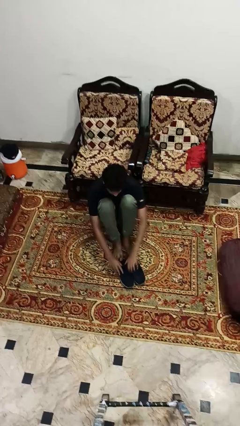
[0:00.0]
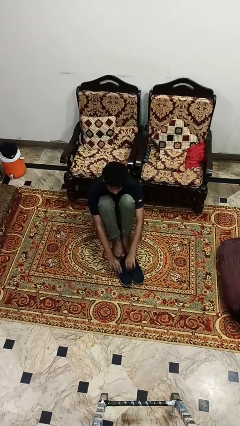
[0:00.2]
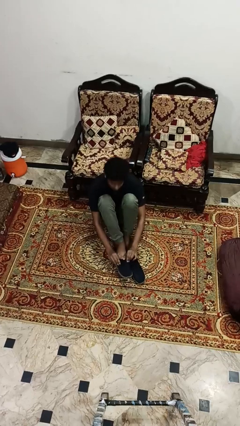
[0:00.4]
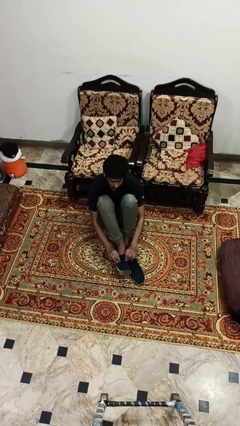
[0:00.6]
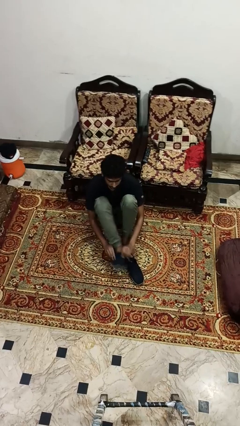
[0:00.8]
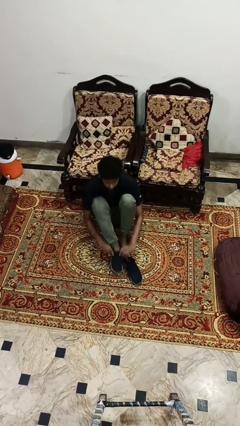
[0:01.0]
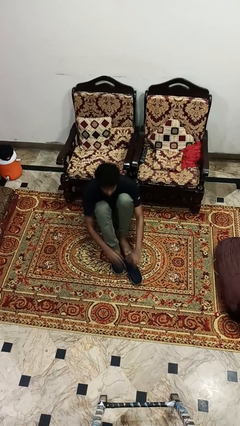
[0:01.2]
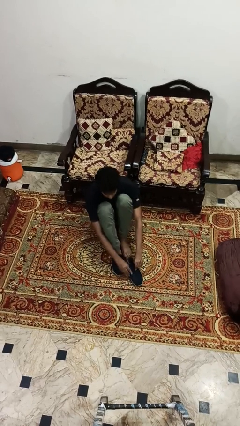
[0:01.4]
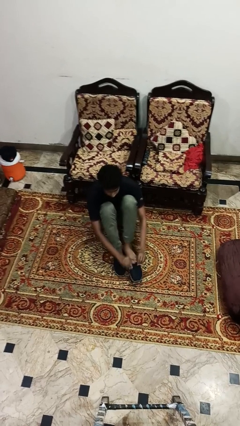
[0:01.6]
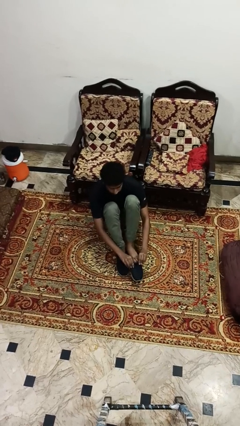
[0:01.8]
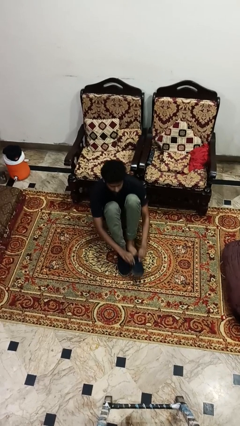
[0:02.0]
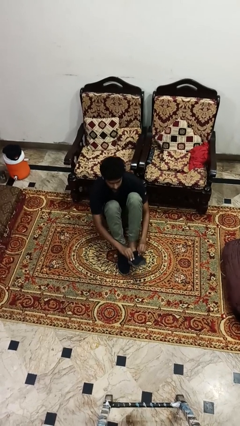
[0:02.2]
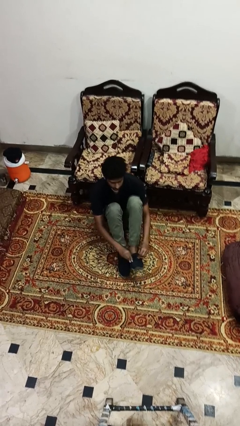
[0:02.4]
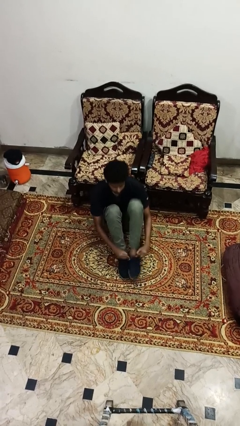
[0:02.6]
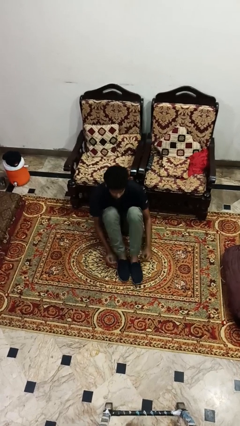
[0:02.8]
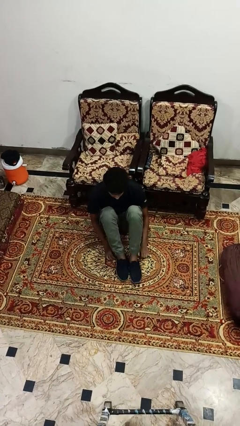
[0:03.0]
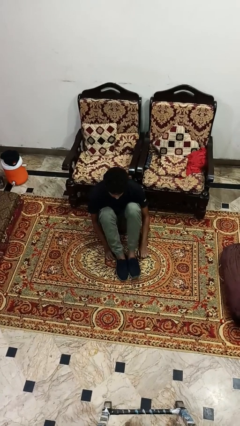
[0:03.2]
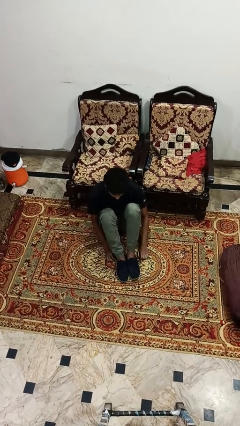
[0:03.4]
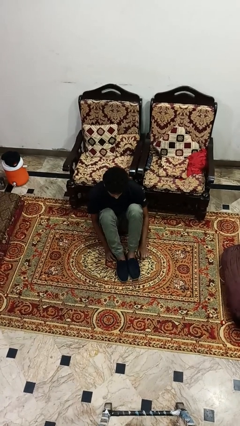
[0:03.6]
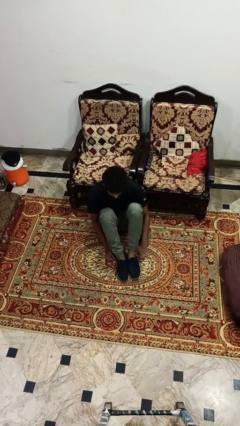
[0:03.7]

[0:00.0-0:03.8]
person puts on shoes

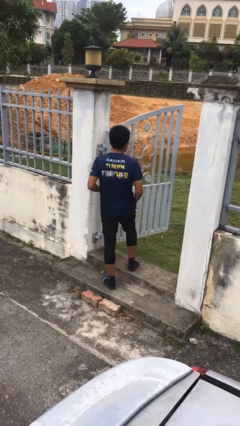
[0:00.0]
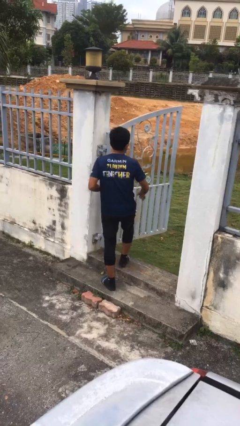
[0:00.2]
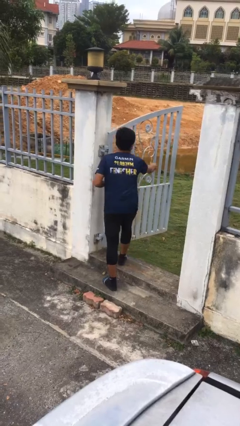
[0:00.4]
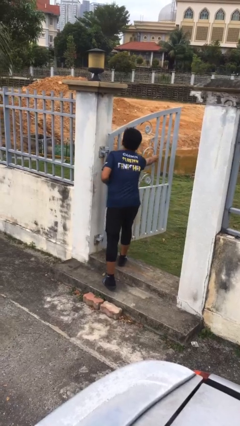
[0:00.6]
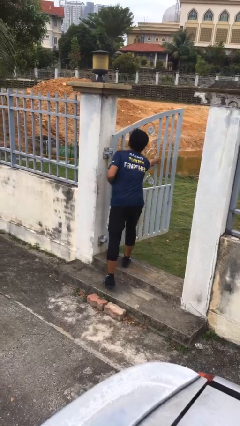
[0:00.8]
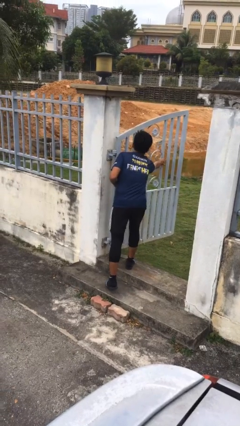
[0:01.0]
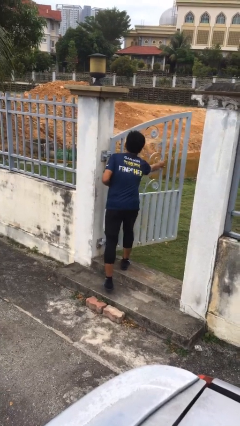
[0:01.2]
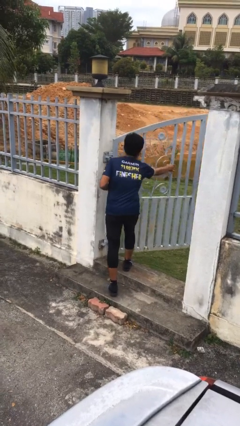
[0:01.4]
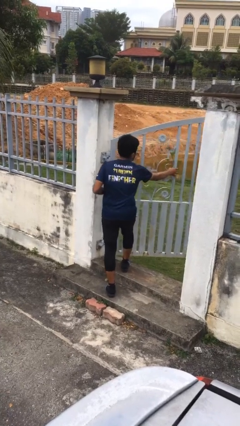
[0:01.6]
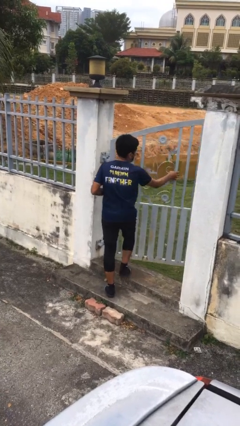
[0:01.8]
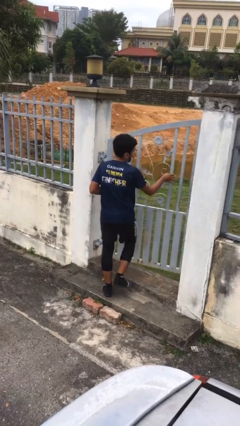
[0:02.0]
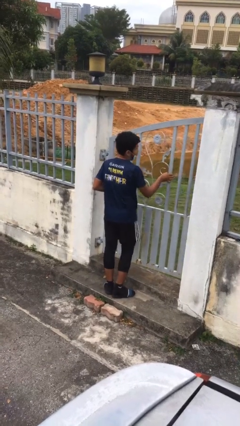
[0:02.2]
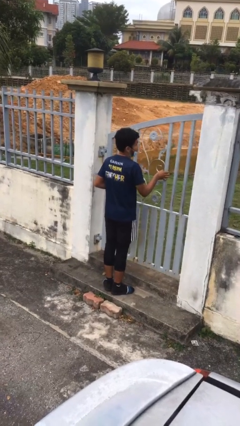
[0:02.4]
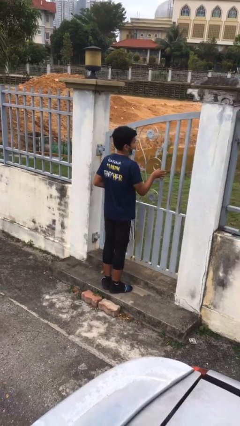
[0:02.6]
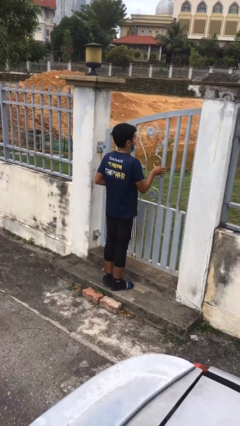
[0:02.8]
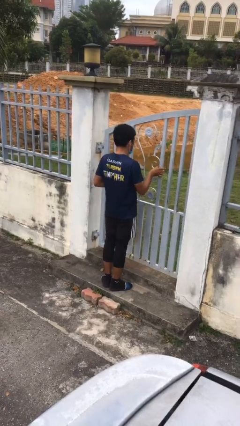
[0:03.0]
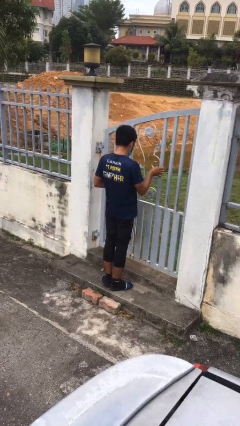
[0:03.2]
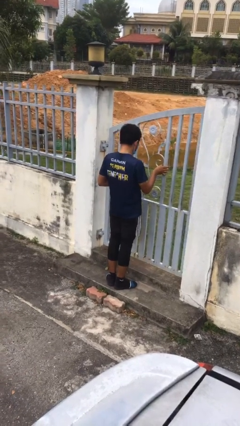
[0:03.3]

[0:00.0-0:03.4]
person closes facility door

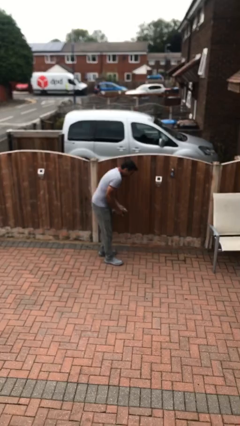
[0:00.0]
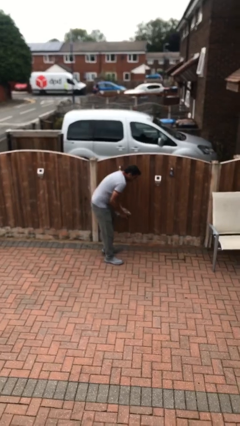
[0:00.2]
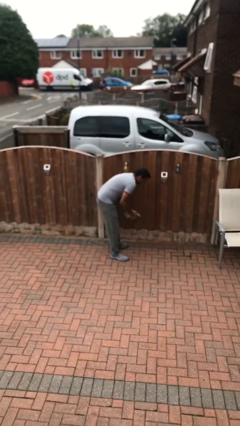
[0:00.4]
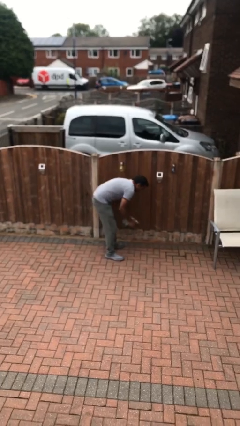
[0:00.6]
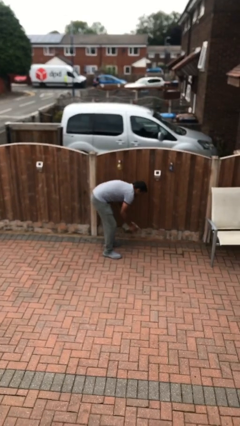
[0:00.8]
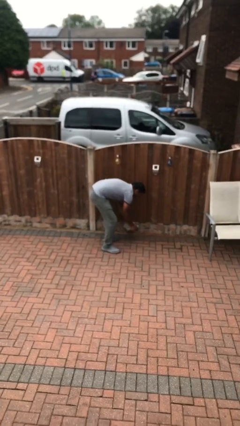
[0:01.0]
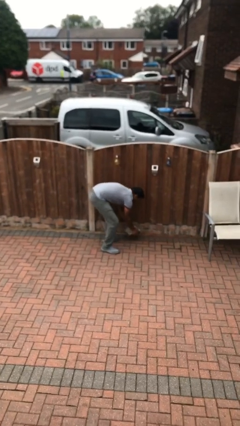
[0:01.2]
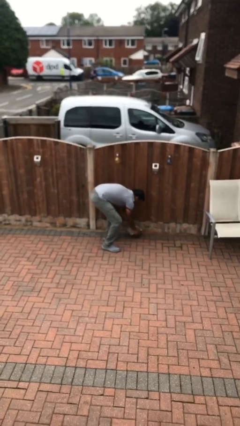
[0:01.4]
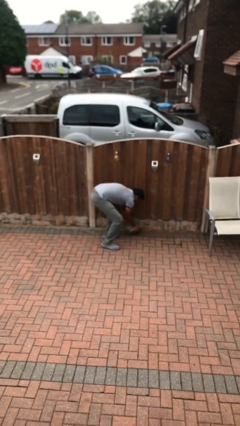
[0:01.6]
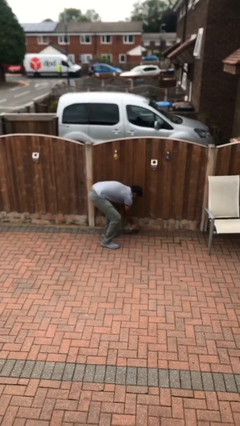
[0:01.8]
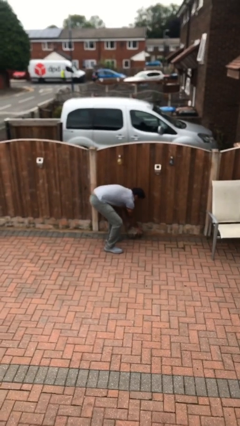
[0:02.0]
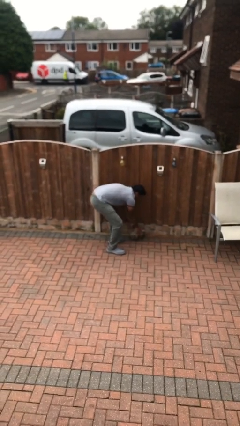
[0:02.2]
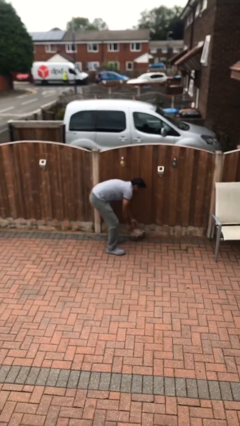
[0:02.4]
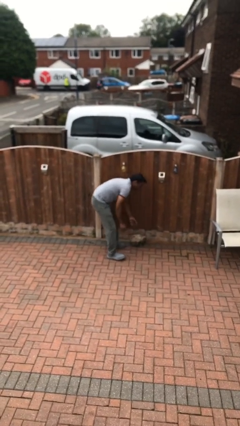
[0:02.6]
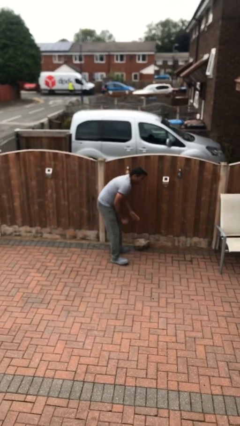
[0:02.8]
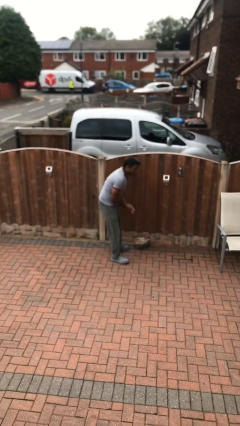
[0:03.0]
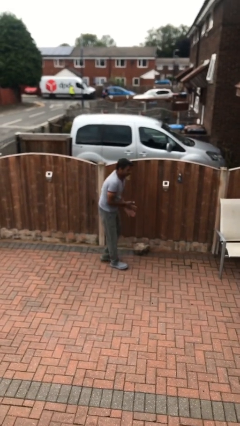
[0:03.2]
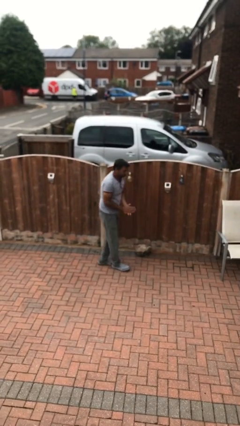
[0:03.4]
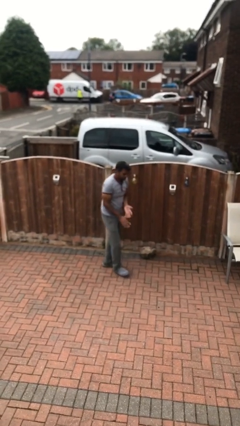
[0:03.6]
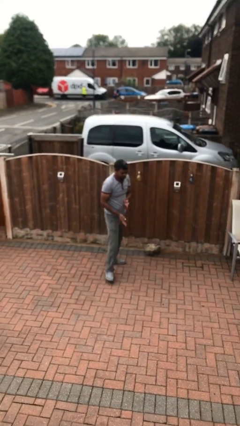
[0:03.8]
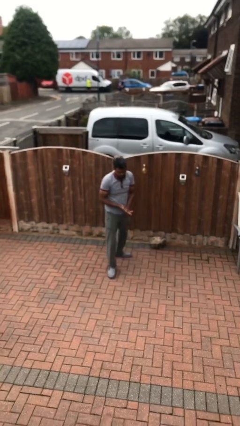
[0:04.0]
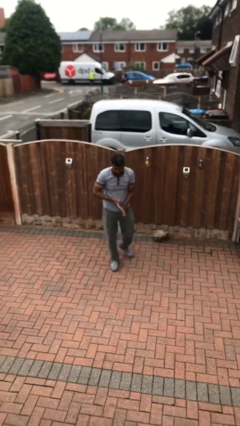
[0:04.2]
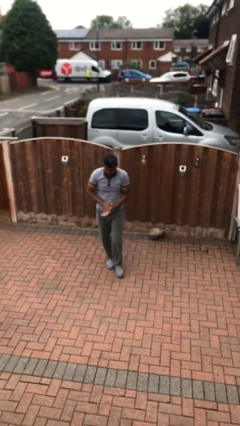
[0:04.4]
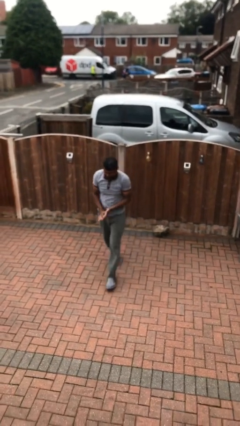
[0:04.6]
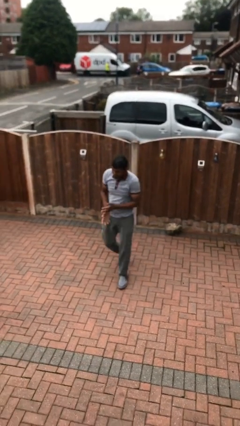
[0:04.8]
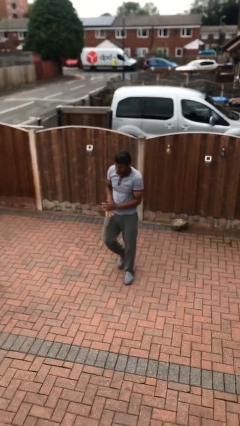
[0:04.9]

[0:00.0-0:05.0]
person puts down object on floor

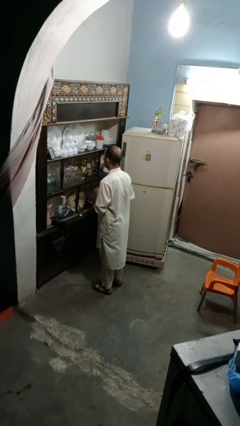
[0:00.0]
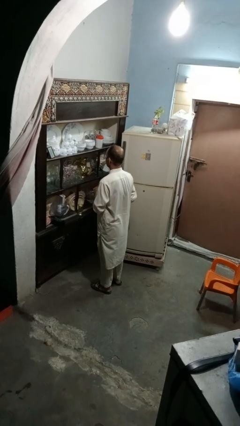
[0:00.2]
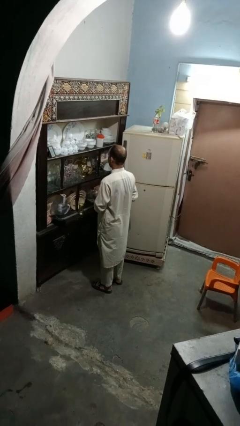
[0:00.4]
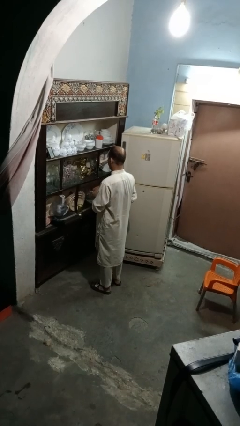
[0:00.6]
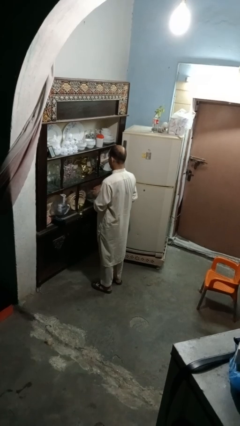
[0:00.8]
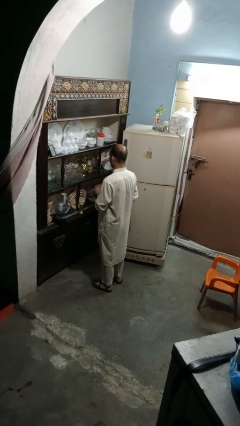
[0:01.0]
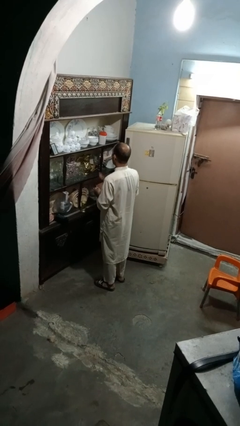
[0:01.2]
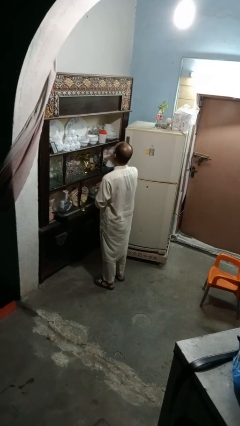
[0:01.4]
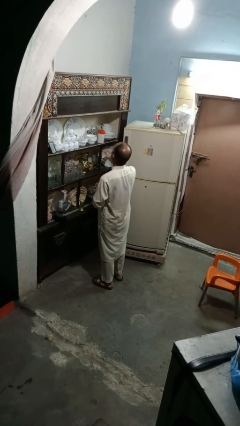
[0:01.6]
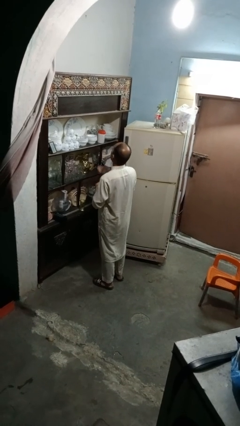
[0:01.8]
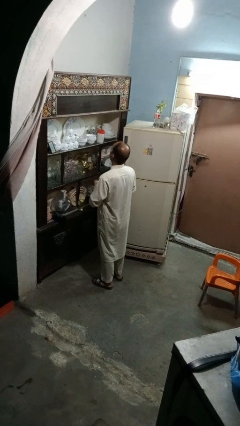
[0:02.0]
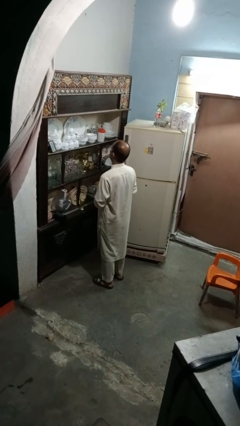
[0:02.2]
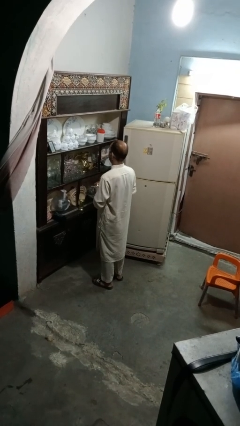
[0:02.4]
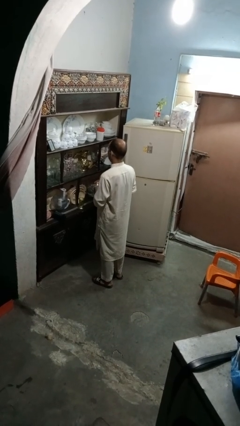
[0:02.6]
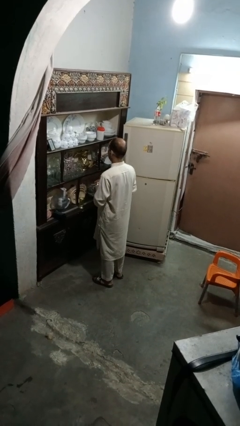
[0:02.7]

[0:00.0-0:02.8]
person takes medicine pills

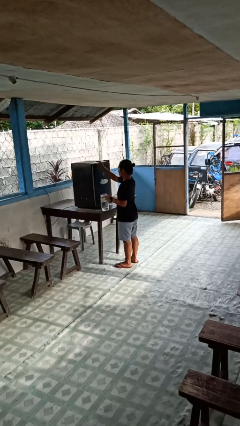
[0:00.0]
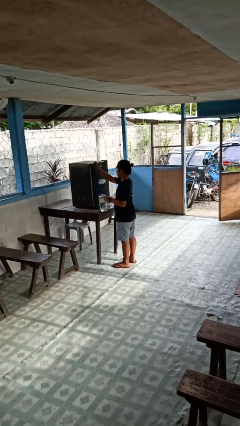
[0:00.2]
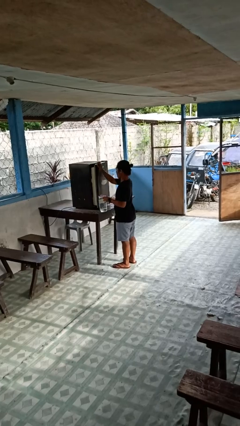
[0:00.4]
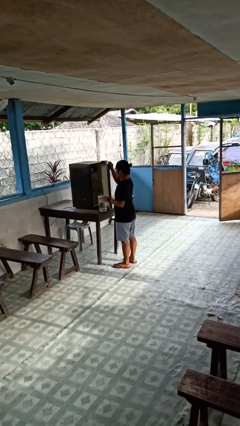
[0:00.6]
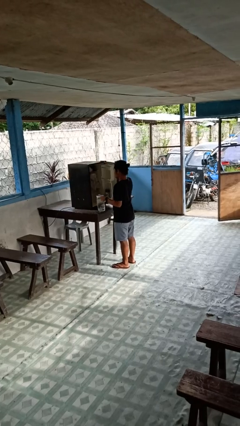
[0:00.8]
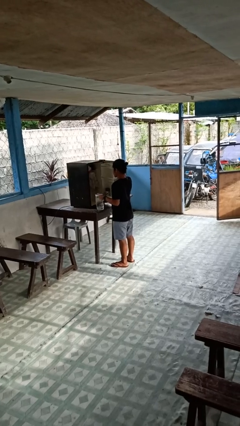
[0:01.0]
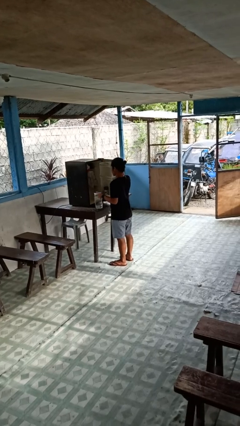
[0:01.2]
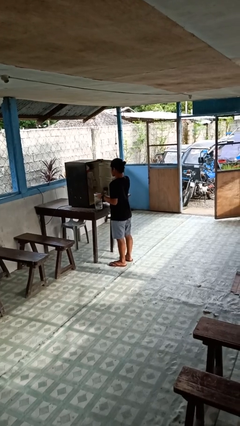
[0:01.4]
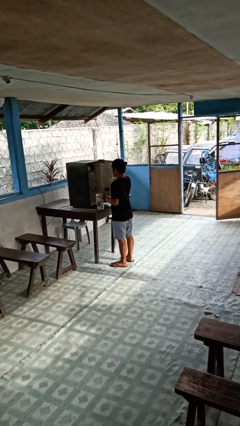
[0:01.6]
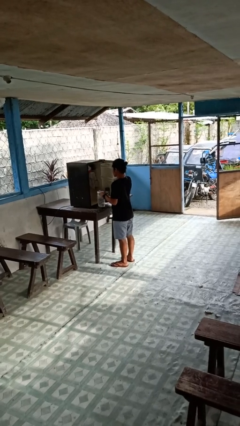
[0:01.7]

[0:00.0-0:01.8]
person opens refrigerator

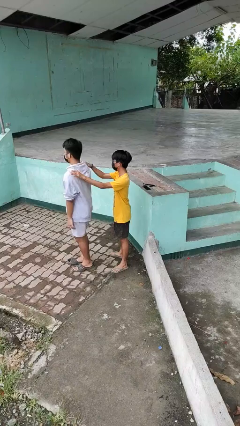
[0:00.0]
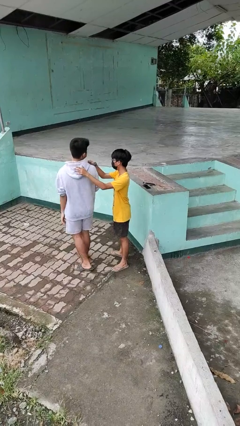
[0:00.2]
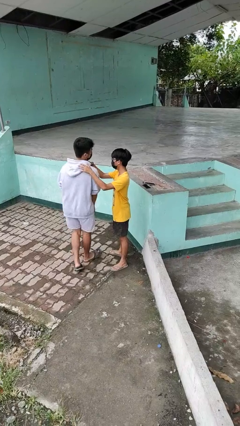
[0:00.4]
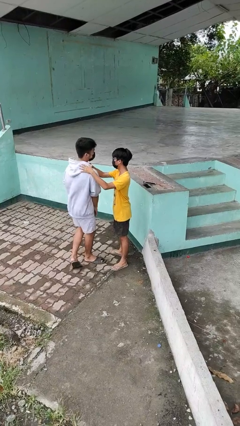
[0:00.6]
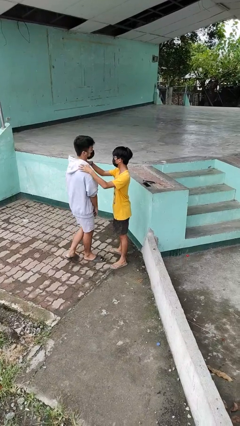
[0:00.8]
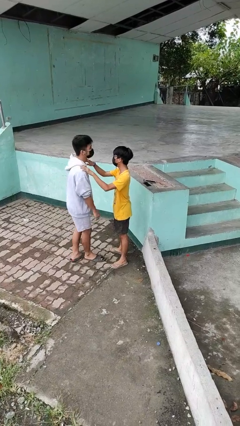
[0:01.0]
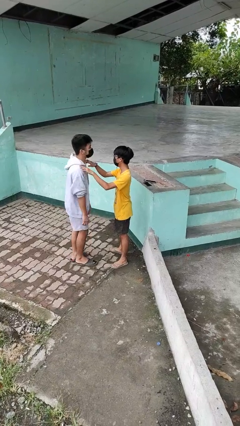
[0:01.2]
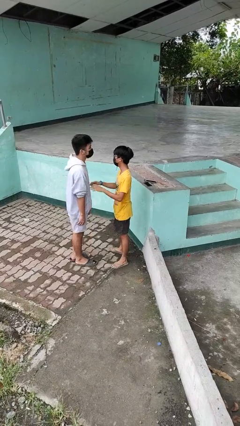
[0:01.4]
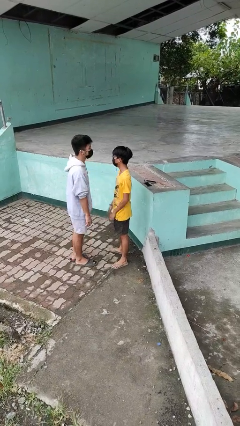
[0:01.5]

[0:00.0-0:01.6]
person spins person around
